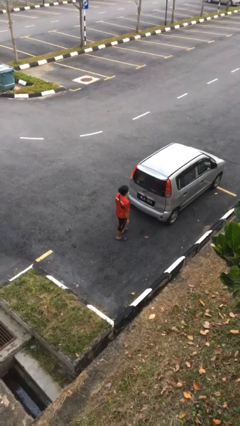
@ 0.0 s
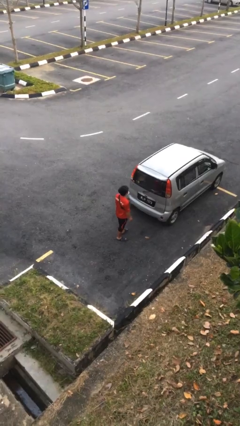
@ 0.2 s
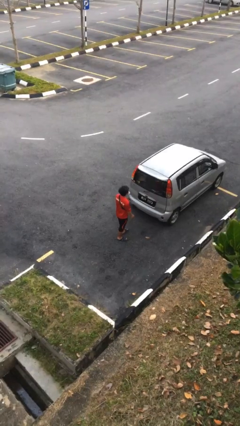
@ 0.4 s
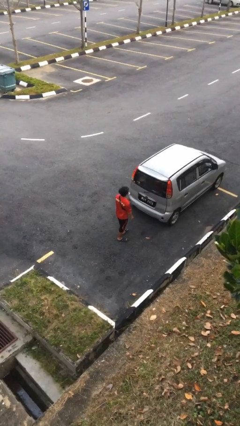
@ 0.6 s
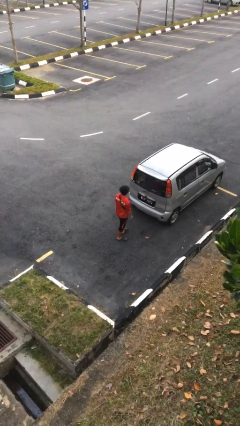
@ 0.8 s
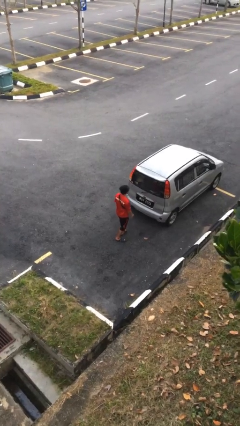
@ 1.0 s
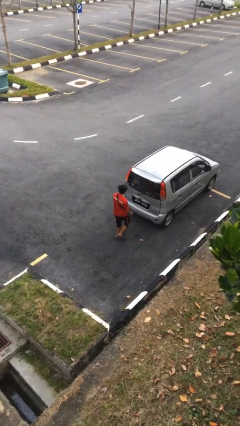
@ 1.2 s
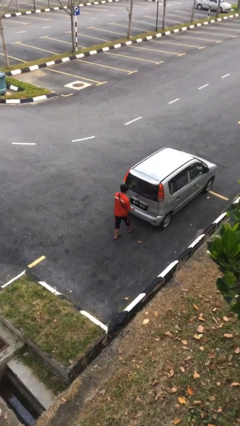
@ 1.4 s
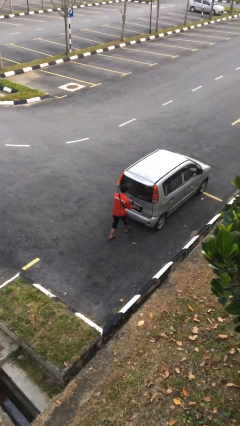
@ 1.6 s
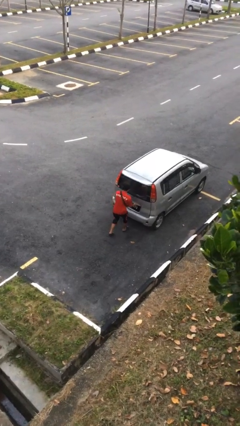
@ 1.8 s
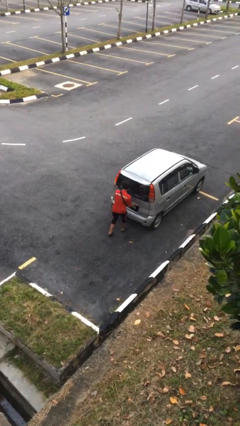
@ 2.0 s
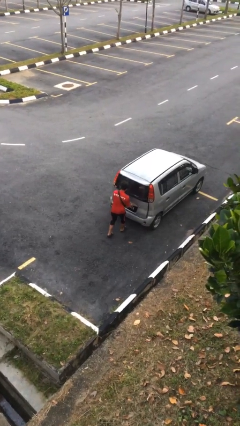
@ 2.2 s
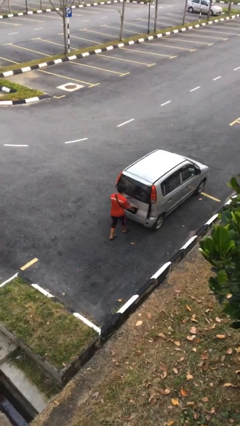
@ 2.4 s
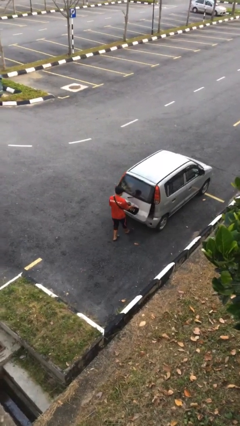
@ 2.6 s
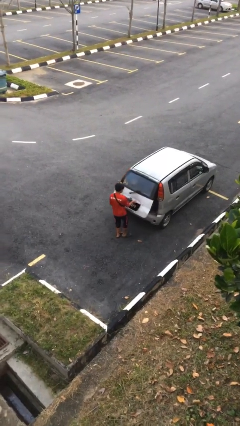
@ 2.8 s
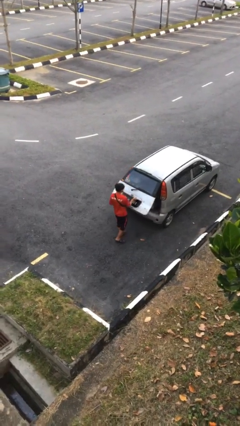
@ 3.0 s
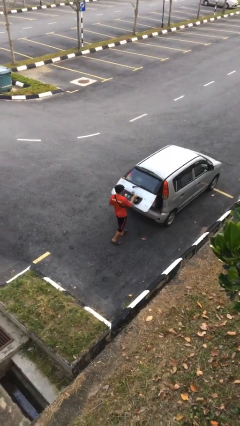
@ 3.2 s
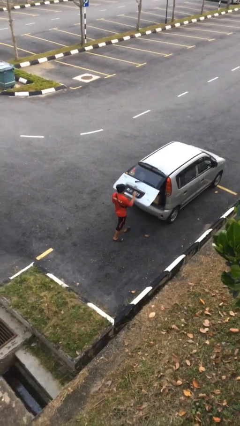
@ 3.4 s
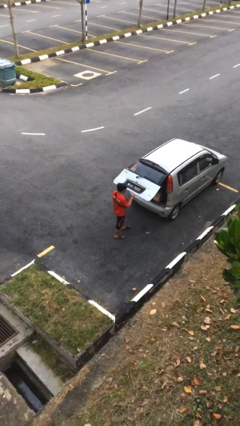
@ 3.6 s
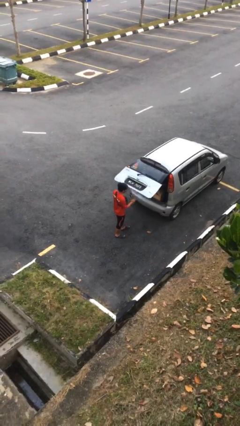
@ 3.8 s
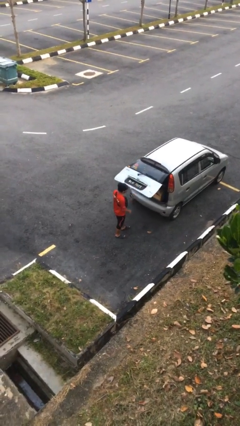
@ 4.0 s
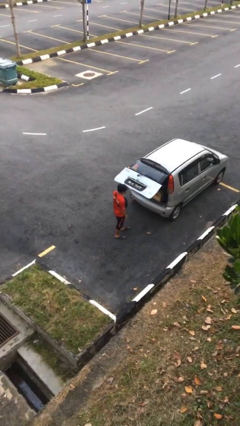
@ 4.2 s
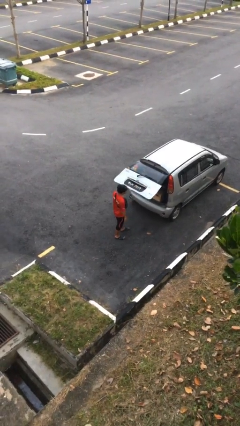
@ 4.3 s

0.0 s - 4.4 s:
person opens car trunk

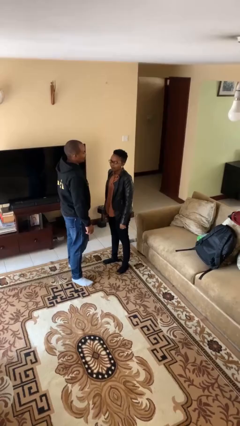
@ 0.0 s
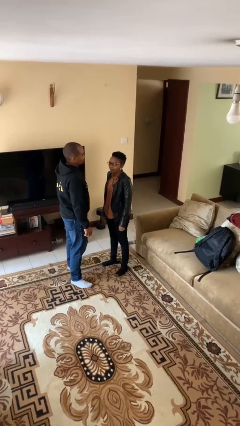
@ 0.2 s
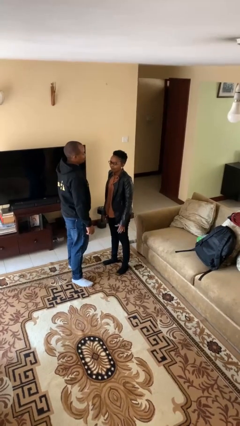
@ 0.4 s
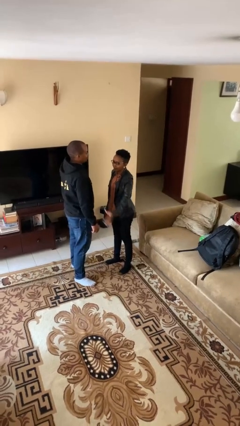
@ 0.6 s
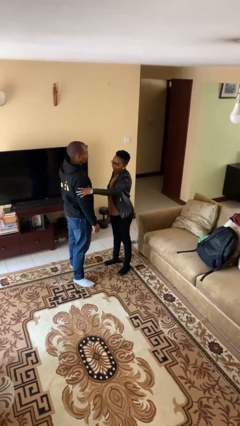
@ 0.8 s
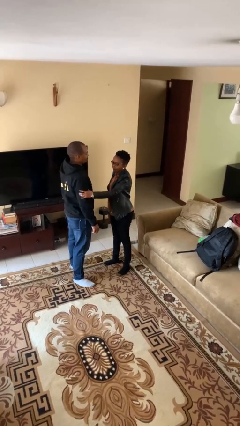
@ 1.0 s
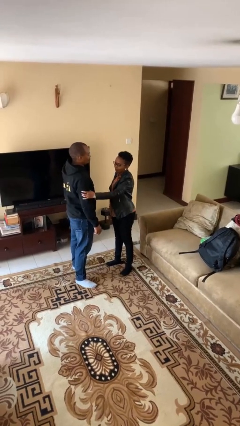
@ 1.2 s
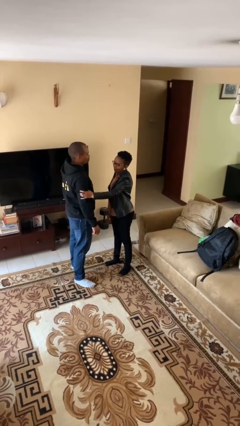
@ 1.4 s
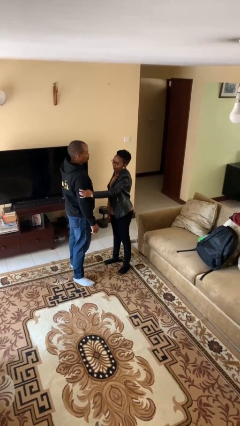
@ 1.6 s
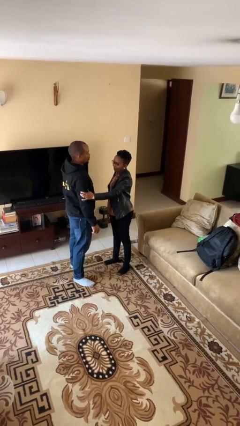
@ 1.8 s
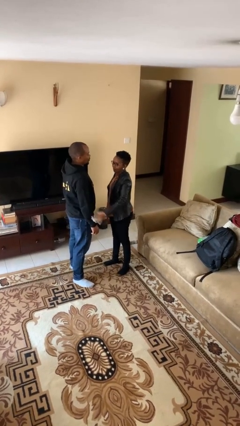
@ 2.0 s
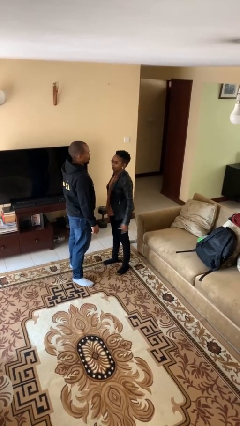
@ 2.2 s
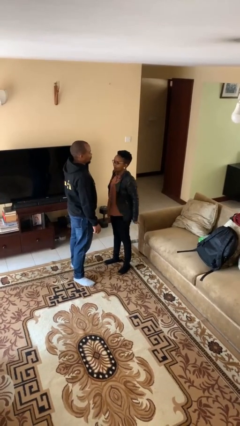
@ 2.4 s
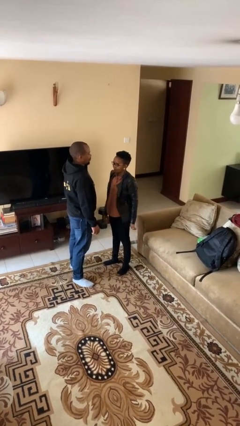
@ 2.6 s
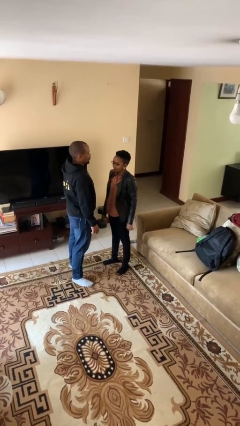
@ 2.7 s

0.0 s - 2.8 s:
person grabs person by bicep

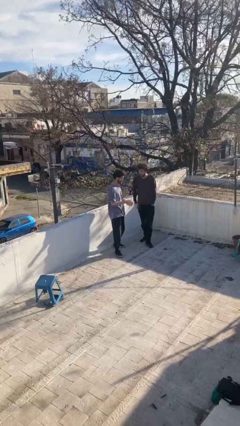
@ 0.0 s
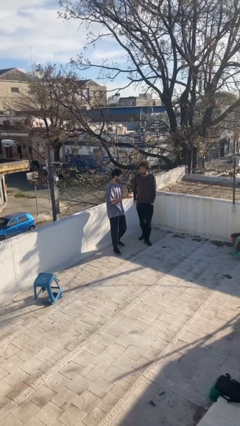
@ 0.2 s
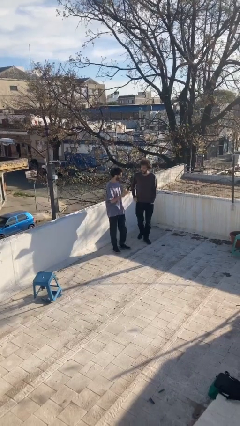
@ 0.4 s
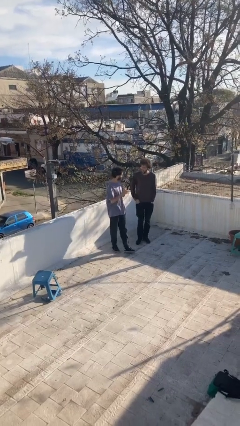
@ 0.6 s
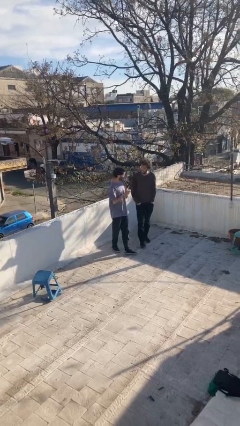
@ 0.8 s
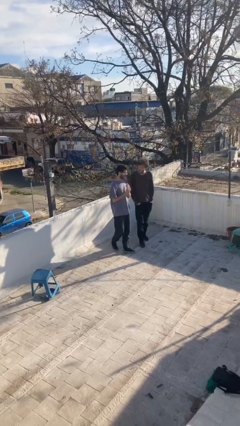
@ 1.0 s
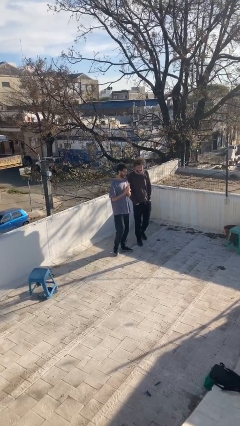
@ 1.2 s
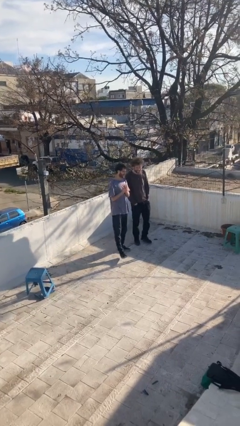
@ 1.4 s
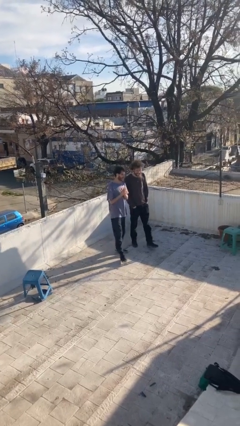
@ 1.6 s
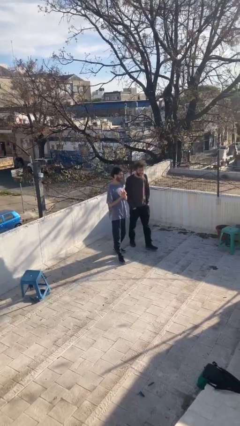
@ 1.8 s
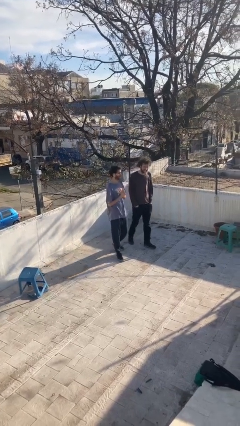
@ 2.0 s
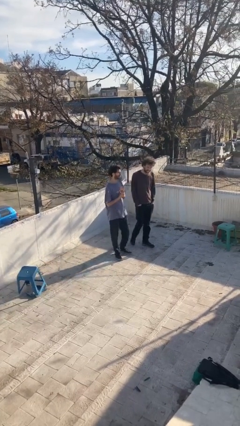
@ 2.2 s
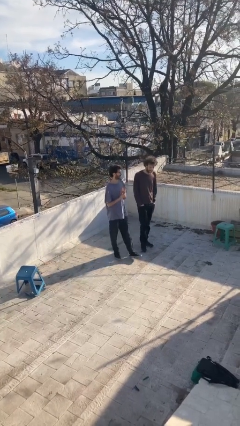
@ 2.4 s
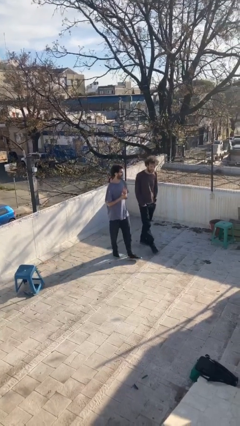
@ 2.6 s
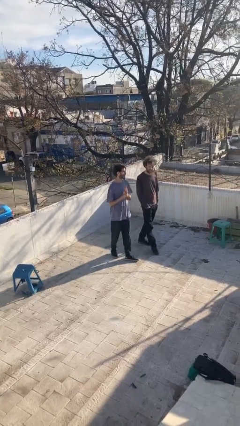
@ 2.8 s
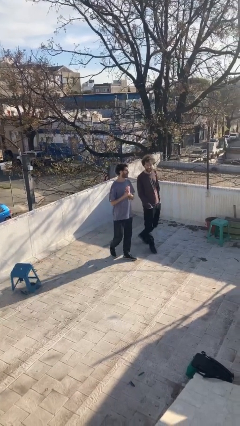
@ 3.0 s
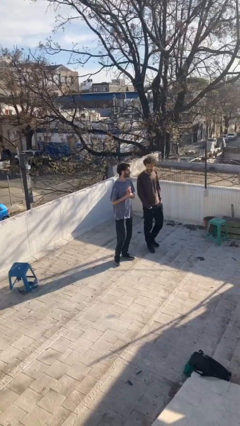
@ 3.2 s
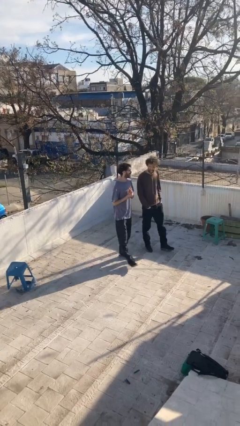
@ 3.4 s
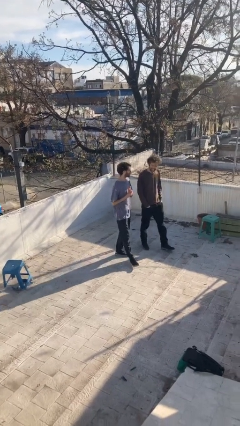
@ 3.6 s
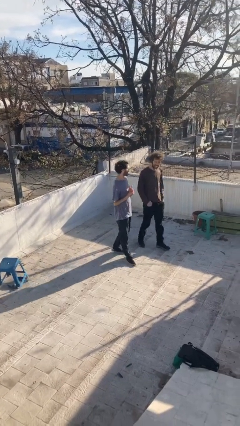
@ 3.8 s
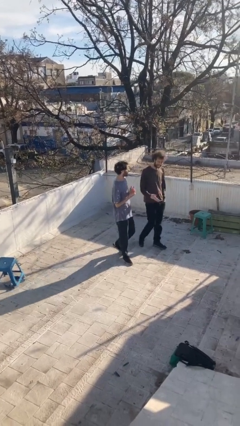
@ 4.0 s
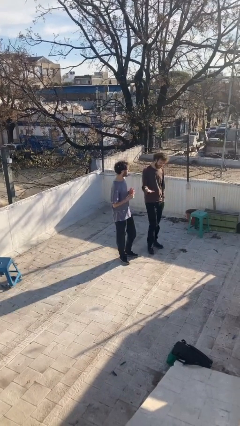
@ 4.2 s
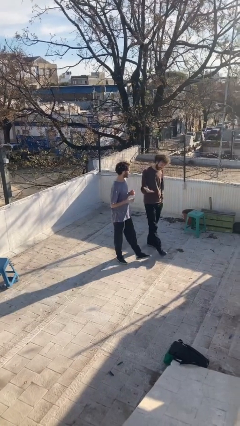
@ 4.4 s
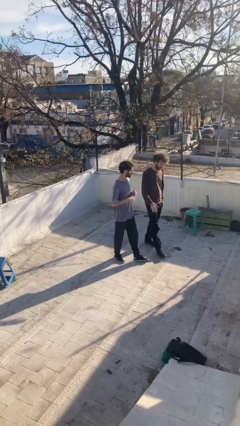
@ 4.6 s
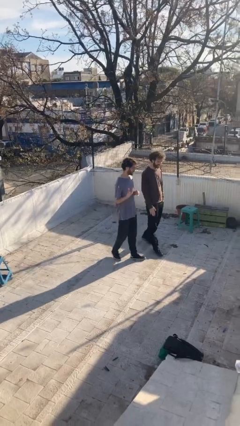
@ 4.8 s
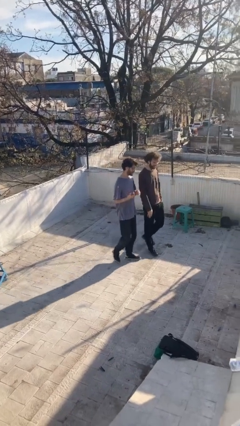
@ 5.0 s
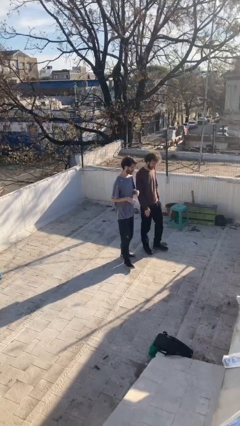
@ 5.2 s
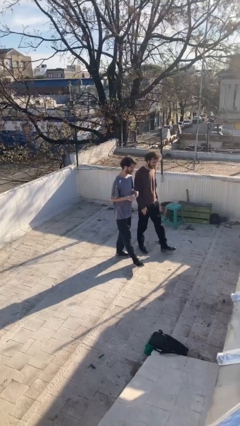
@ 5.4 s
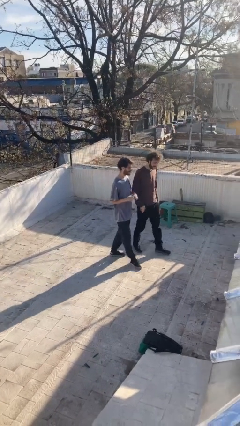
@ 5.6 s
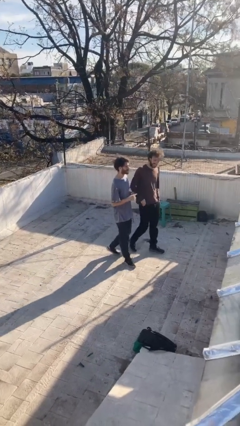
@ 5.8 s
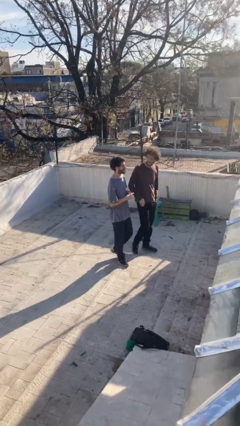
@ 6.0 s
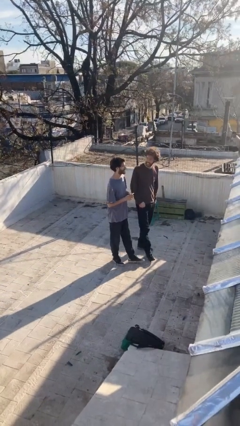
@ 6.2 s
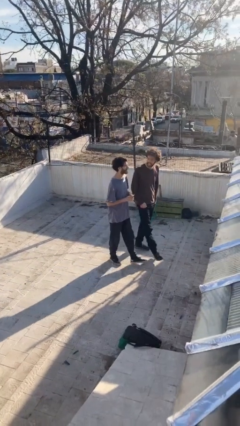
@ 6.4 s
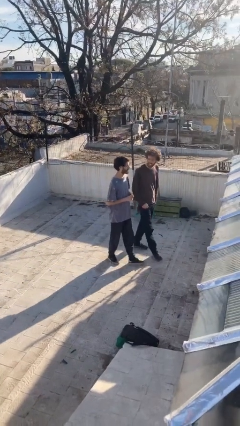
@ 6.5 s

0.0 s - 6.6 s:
person talks to person

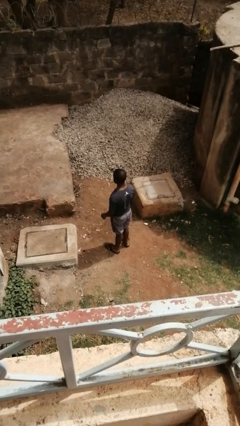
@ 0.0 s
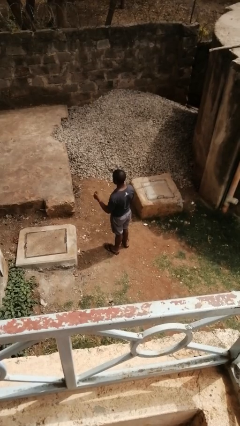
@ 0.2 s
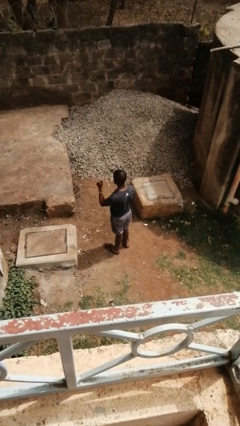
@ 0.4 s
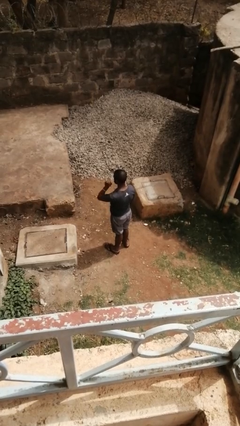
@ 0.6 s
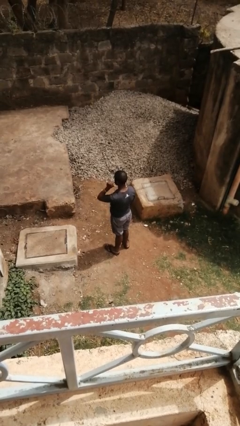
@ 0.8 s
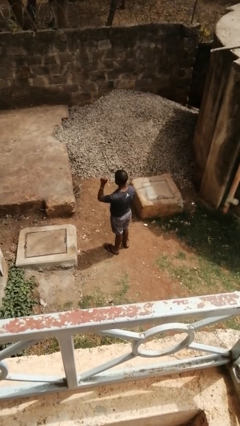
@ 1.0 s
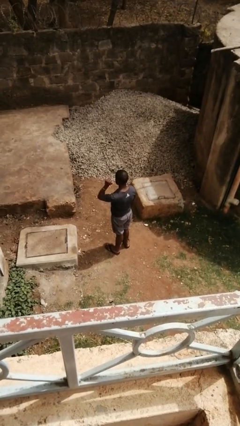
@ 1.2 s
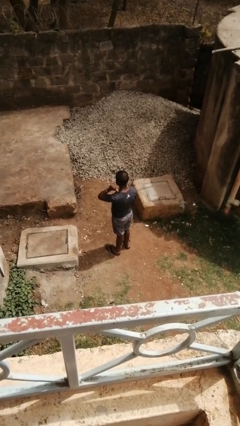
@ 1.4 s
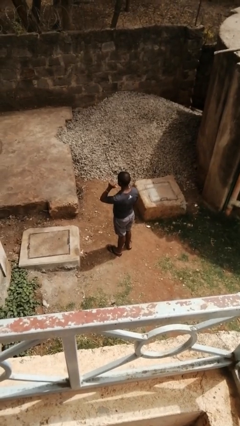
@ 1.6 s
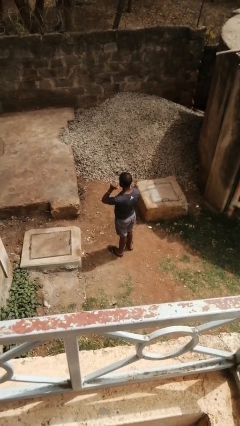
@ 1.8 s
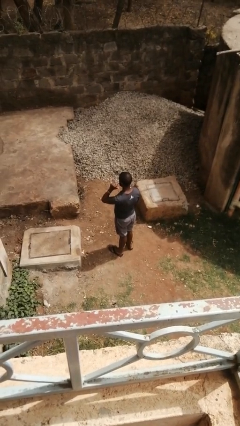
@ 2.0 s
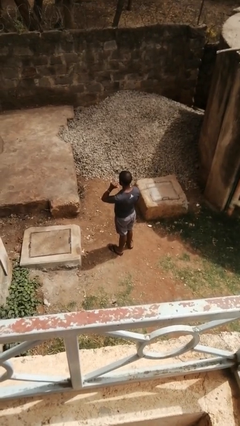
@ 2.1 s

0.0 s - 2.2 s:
person gestures behind me

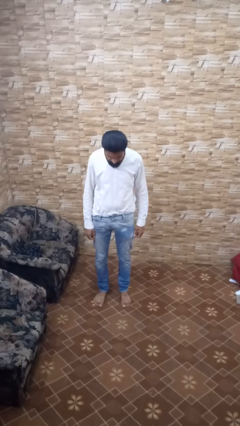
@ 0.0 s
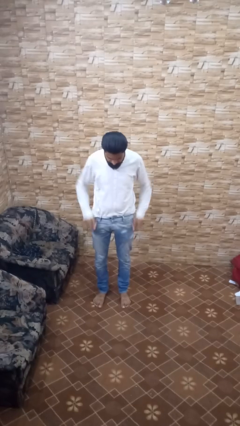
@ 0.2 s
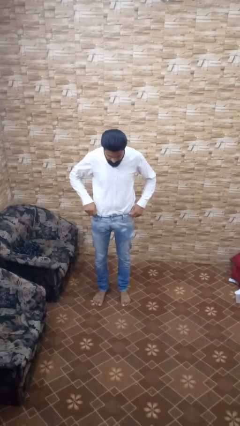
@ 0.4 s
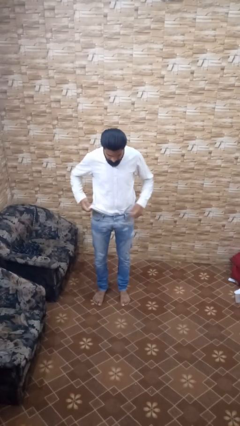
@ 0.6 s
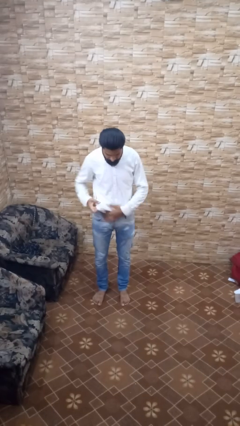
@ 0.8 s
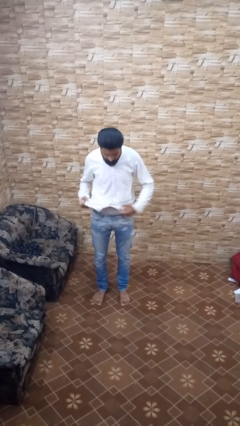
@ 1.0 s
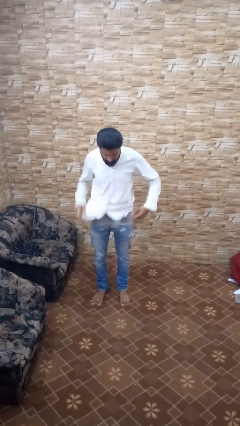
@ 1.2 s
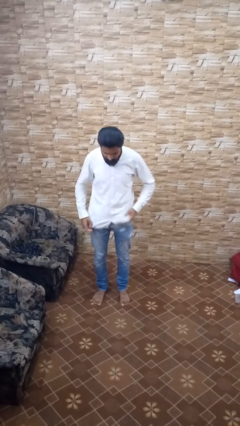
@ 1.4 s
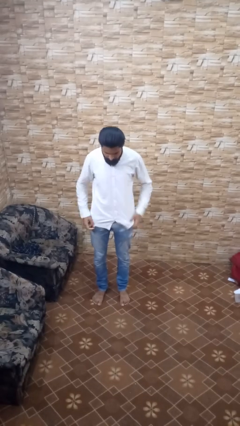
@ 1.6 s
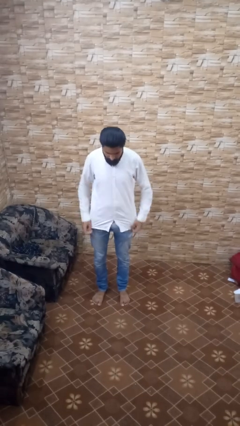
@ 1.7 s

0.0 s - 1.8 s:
person untucks shirt
